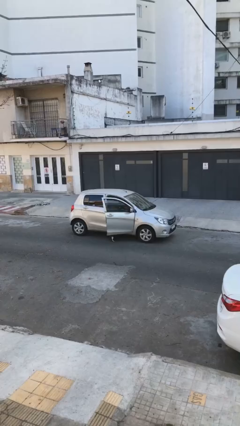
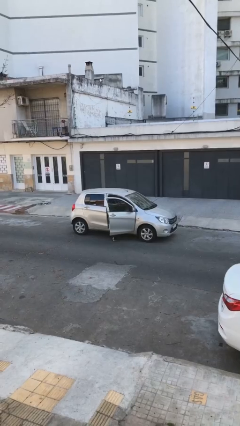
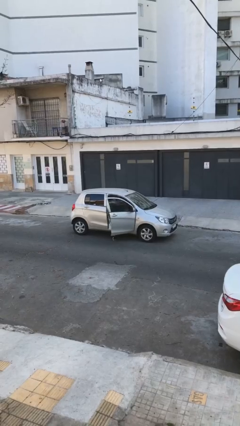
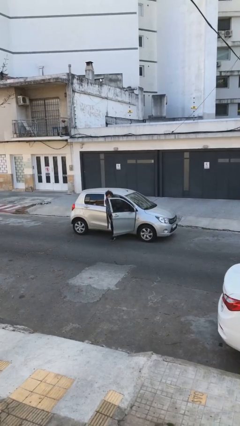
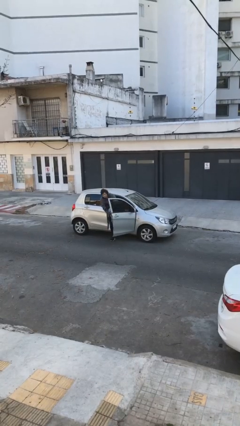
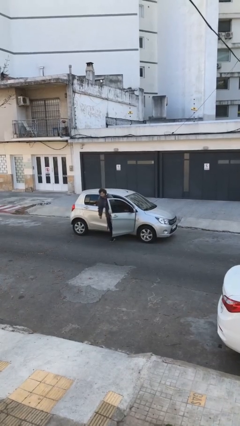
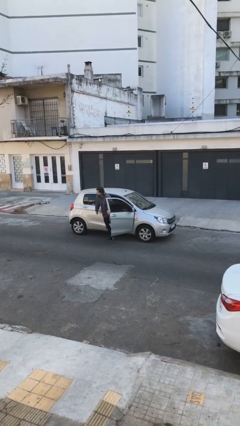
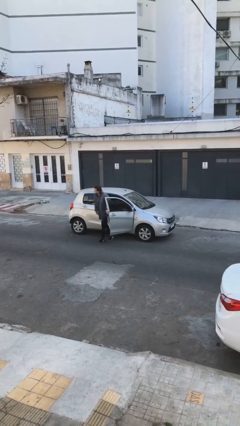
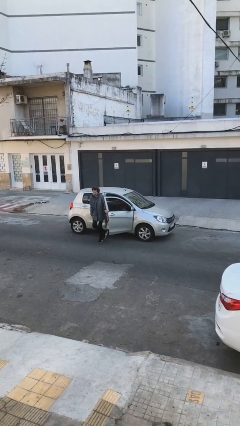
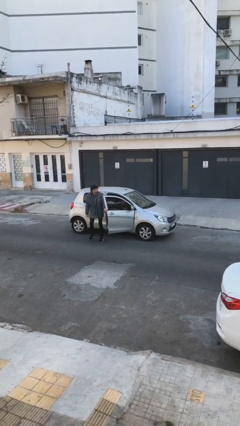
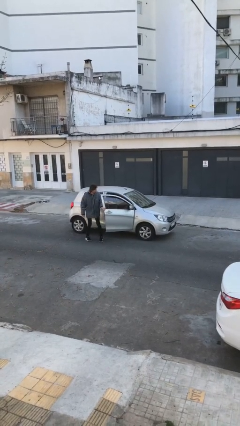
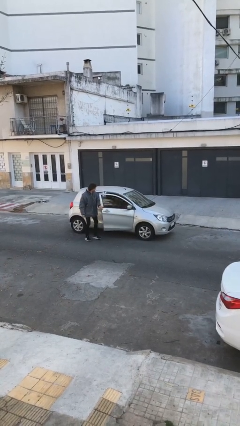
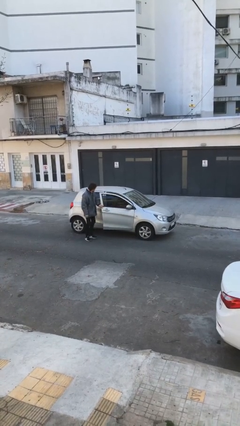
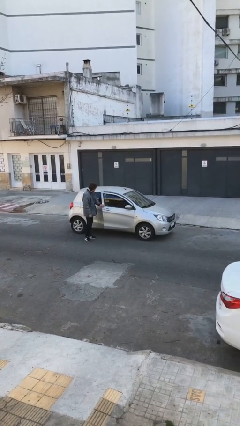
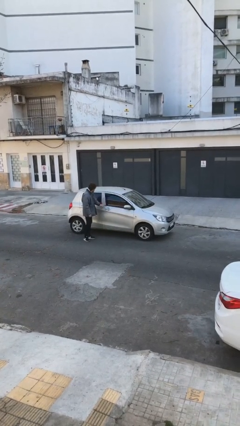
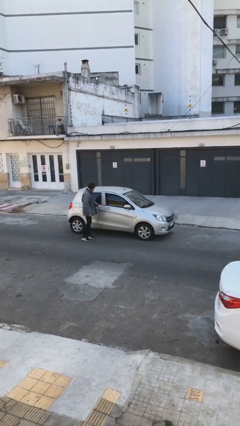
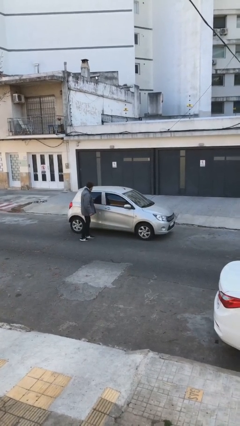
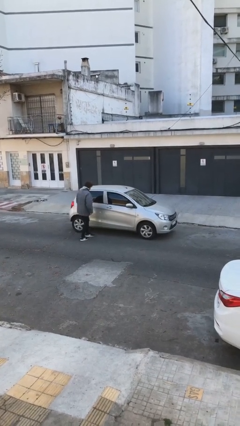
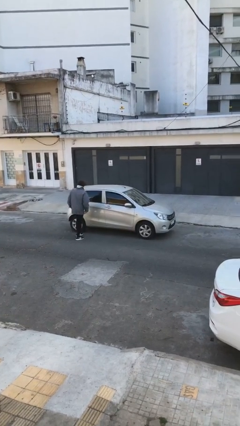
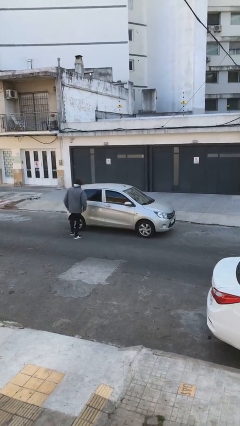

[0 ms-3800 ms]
car drops off person

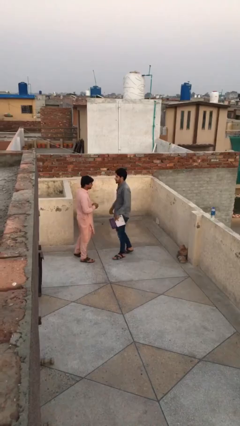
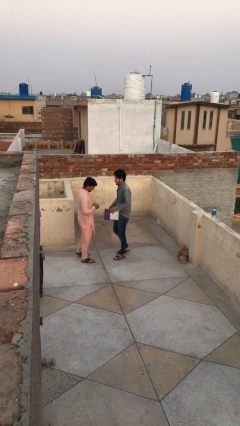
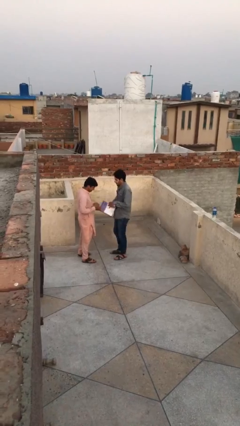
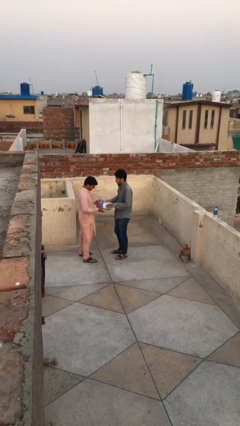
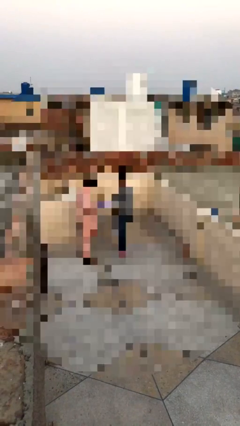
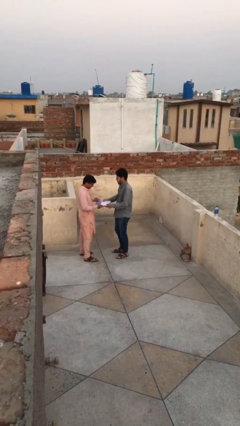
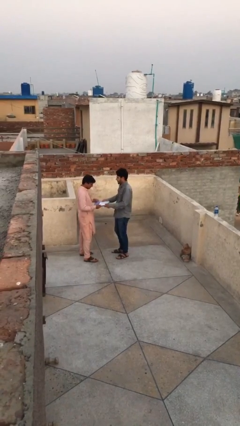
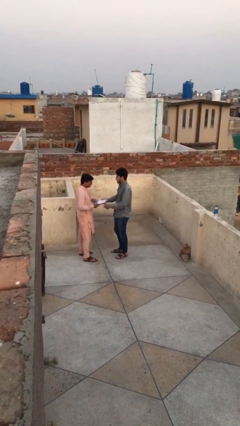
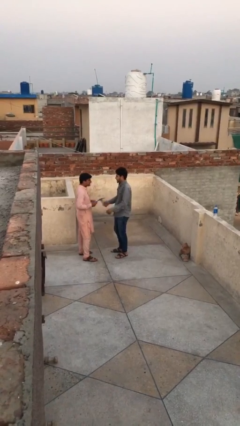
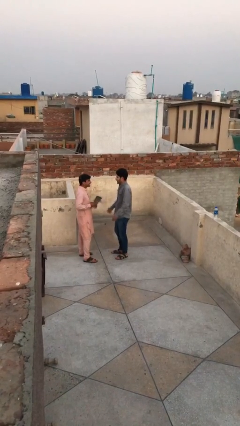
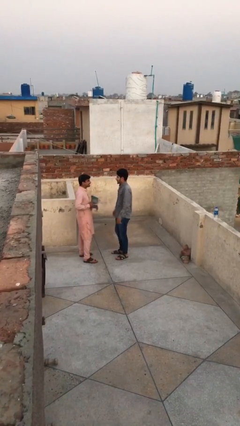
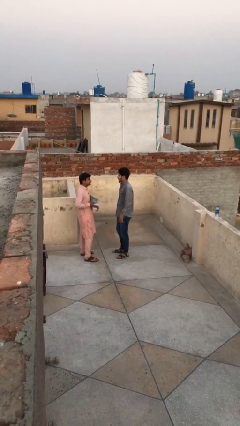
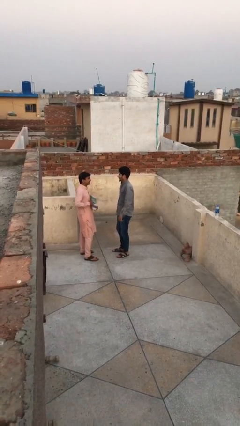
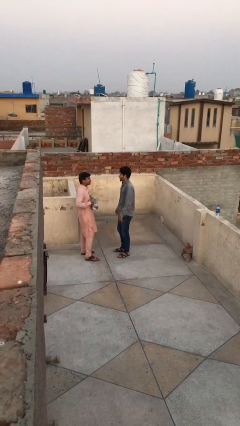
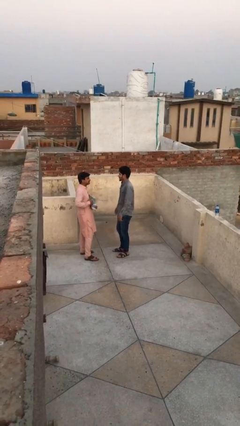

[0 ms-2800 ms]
person transfers object to person

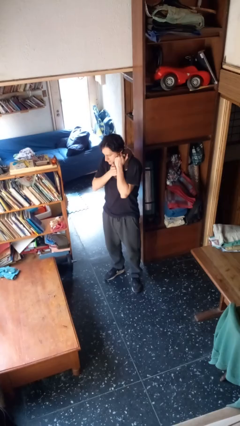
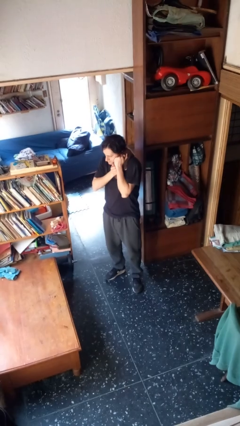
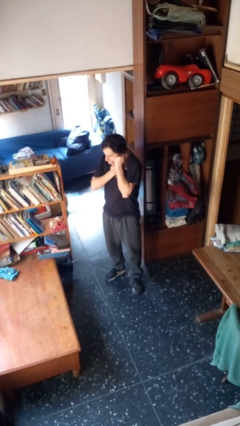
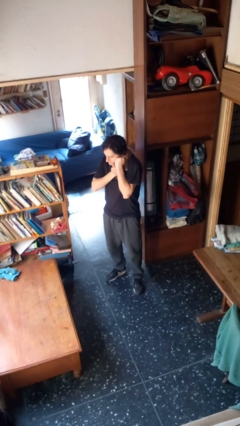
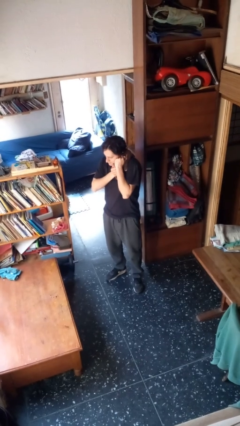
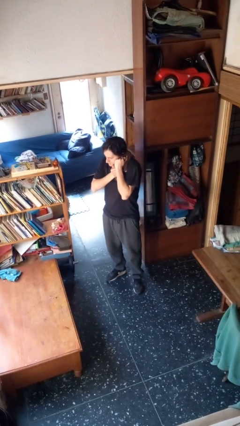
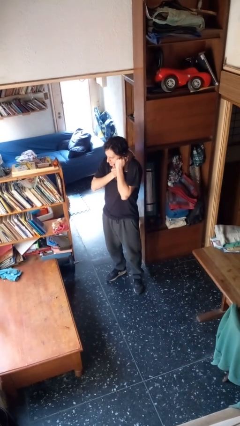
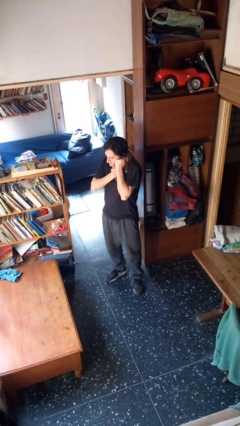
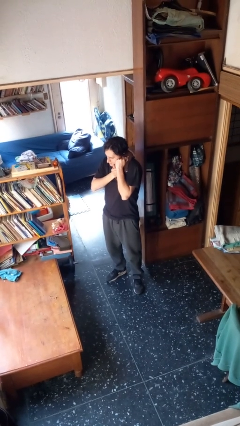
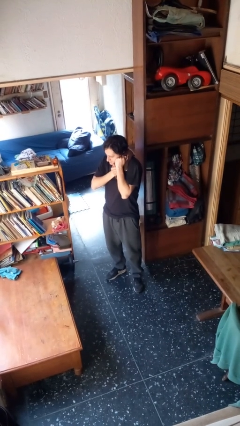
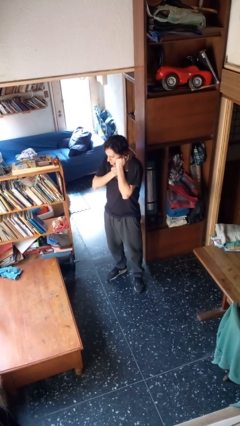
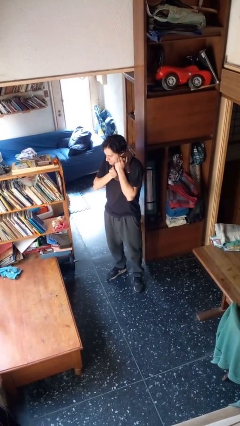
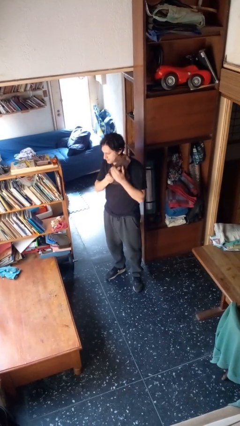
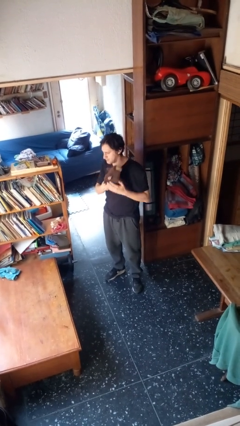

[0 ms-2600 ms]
person hugs stuffed animal

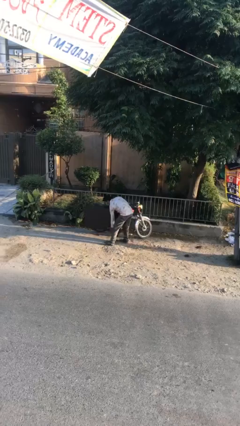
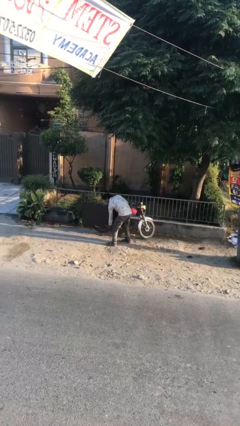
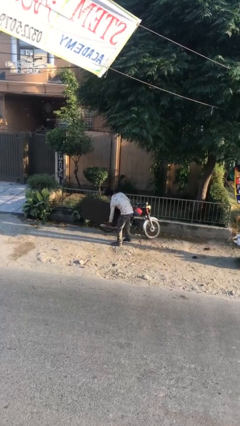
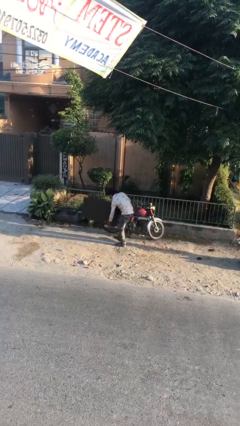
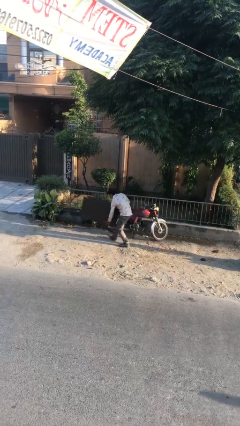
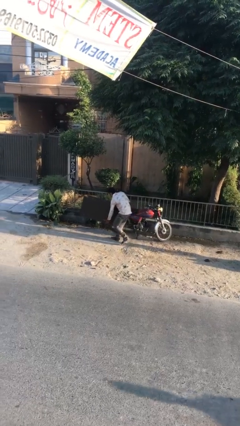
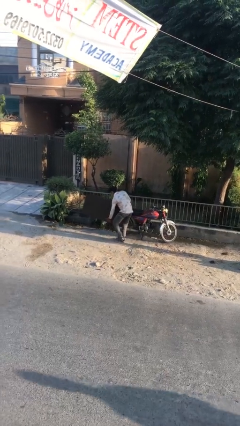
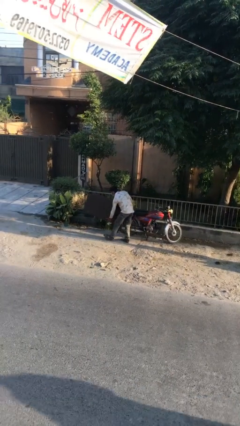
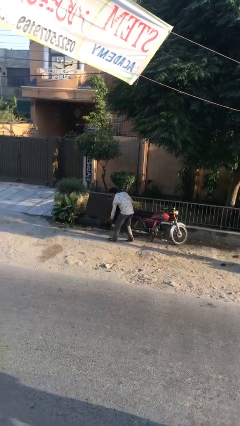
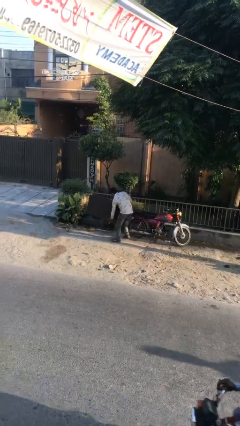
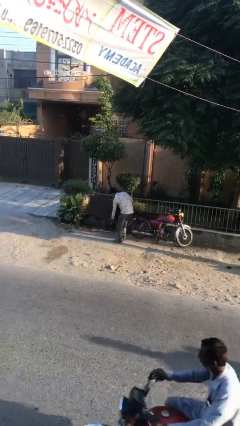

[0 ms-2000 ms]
person carries heavy object

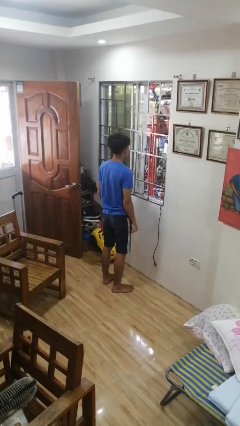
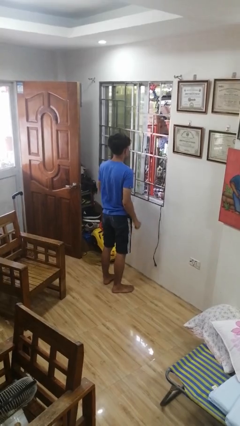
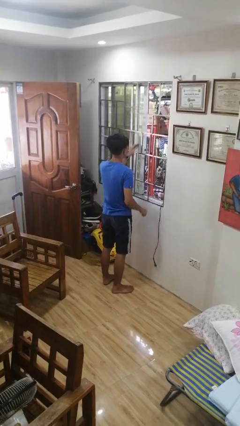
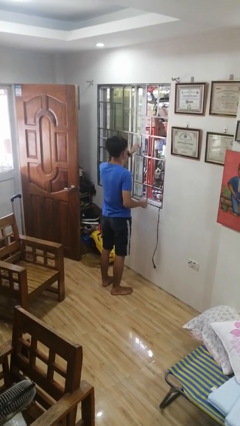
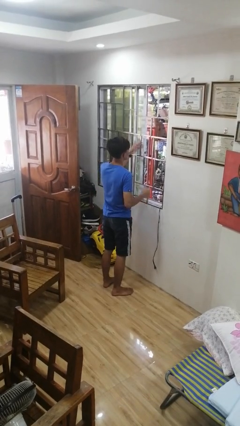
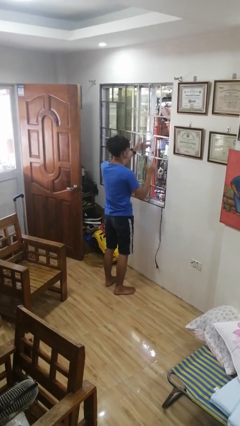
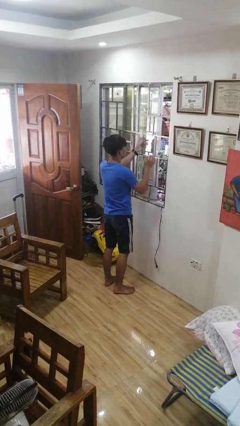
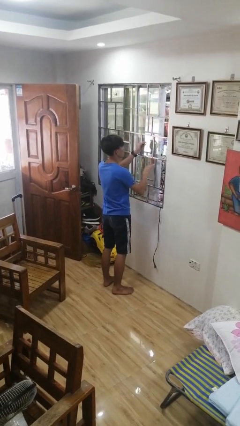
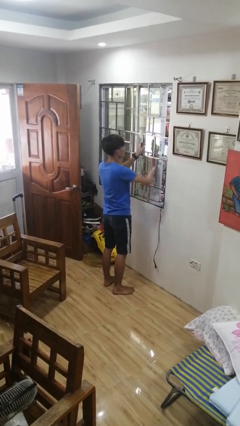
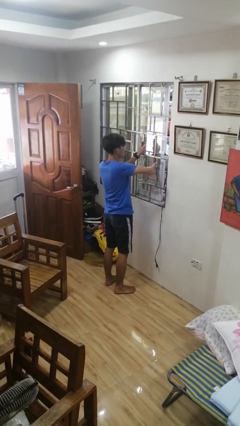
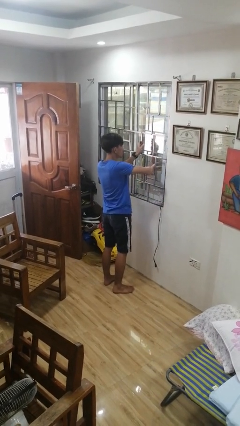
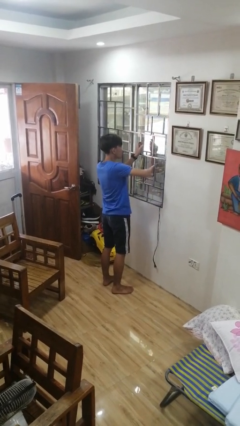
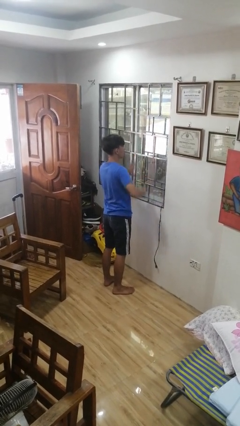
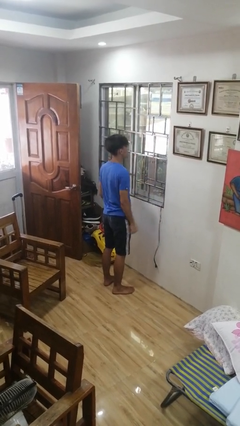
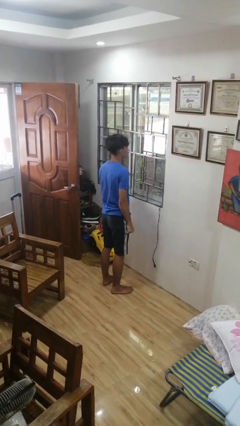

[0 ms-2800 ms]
person closes home window

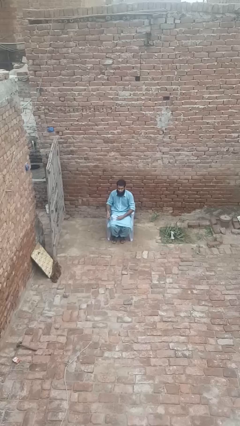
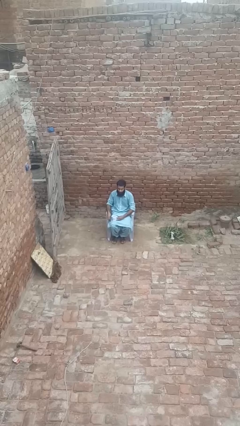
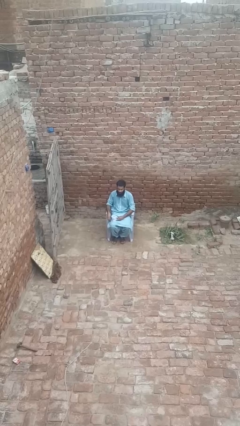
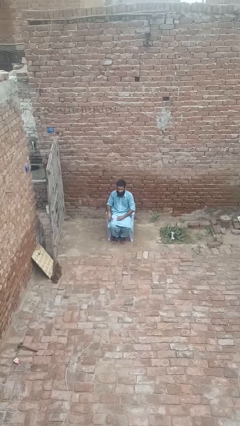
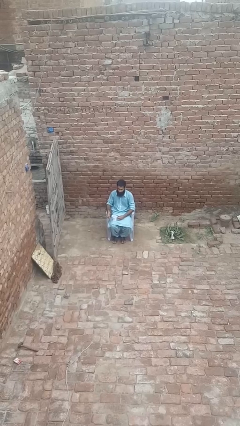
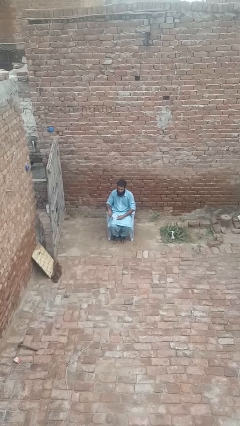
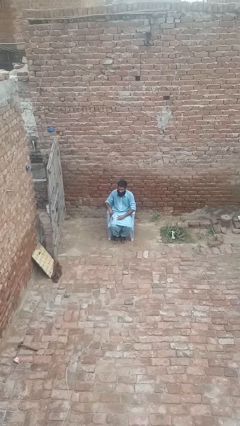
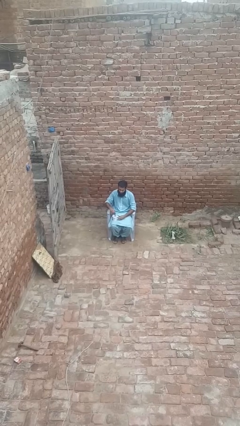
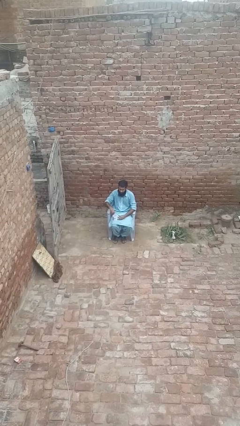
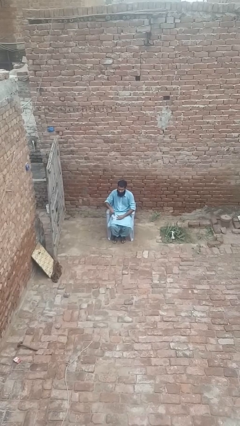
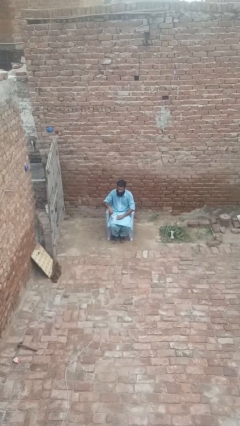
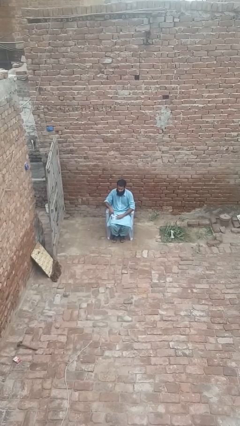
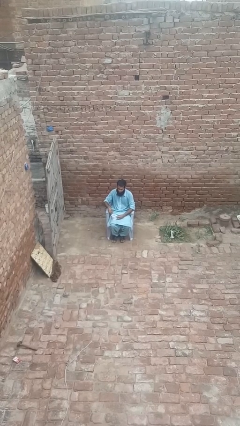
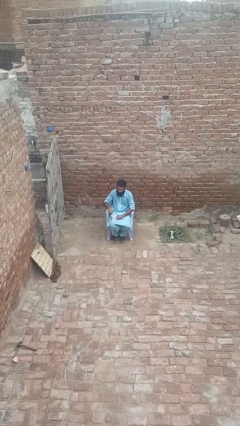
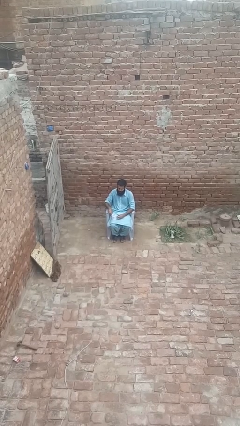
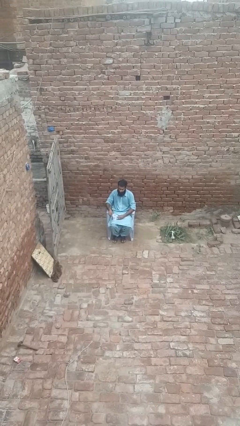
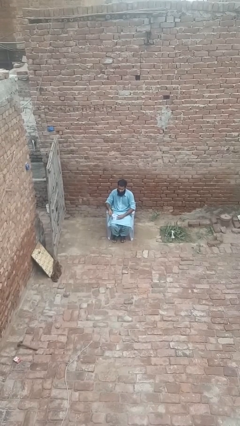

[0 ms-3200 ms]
person stirs mug
